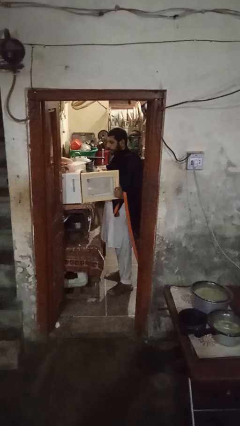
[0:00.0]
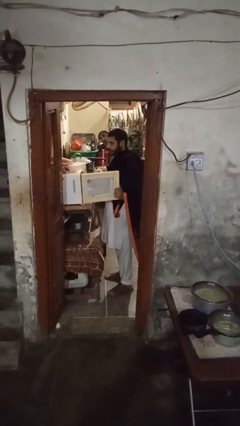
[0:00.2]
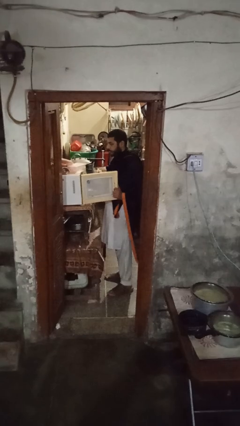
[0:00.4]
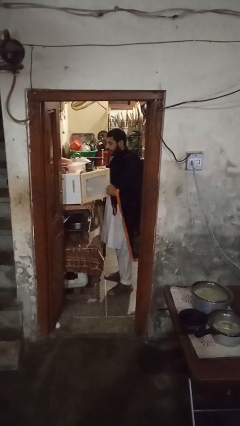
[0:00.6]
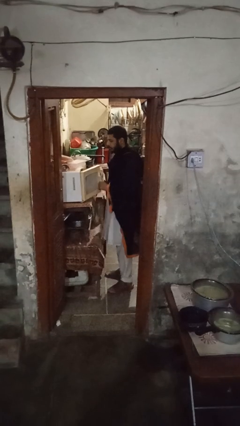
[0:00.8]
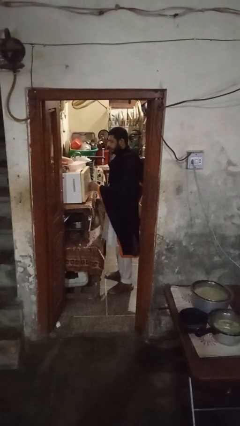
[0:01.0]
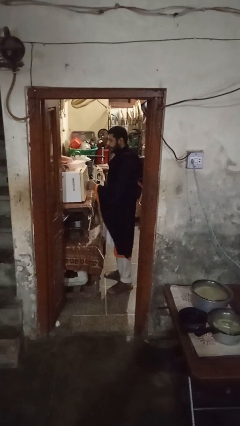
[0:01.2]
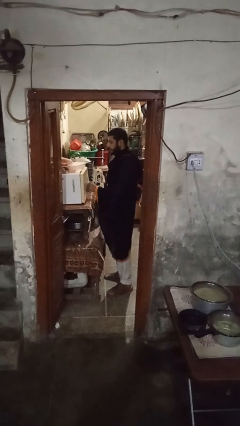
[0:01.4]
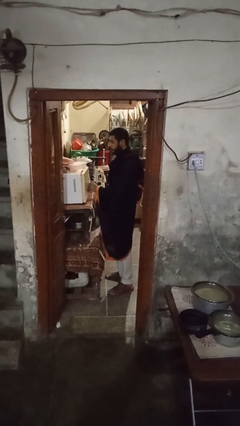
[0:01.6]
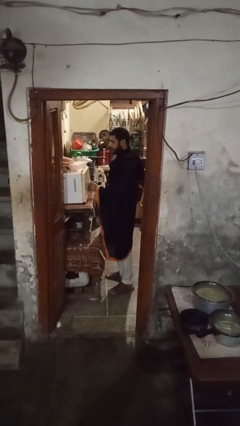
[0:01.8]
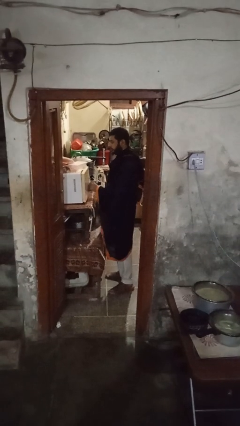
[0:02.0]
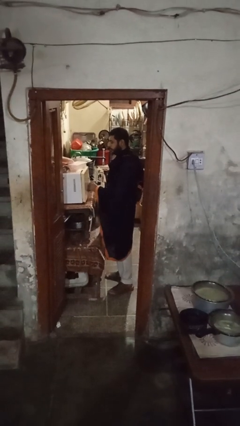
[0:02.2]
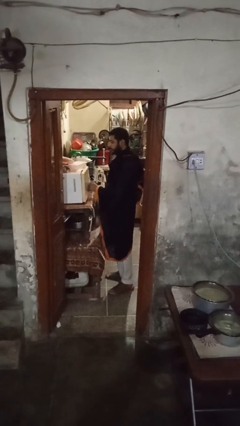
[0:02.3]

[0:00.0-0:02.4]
person closes microwave

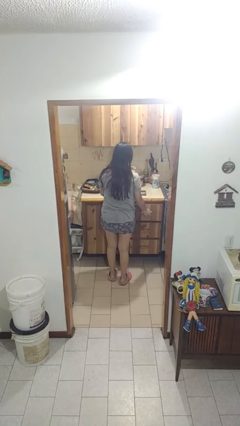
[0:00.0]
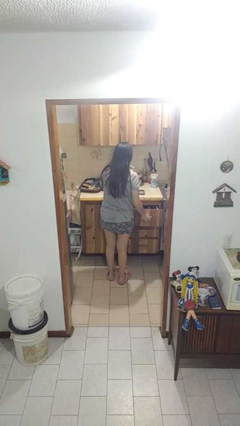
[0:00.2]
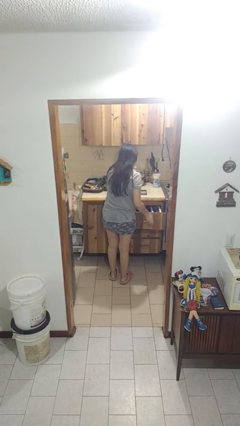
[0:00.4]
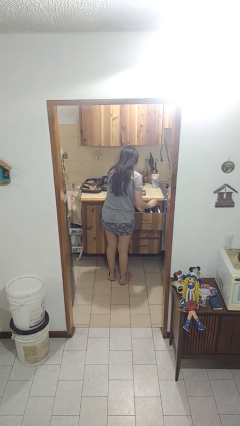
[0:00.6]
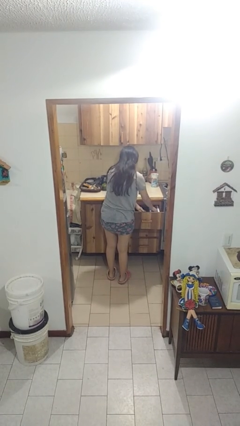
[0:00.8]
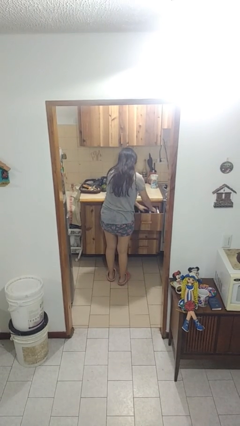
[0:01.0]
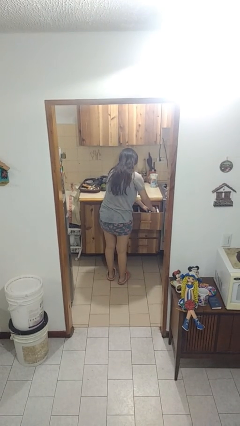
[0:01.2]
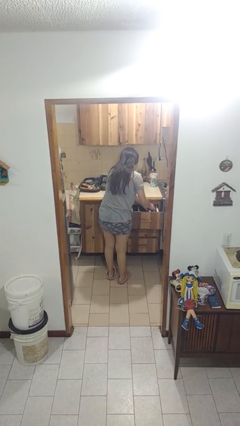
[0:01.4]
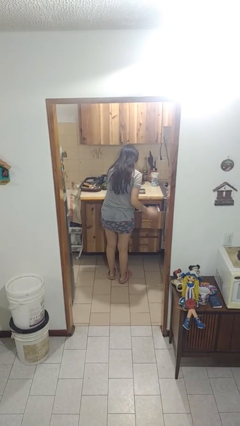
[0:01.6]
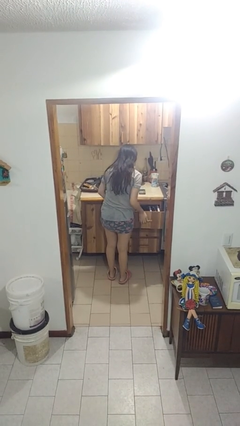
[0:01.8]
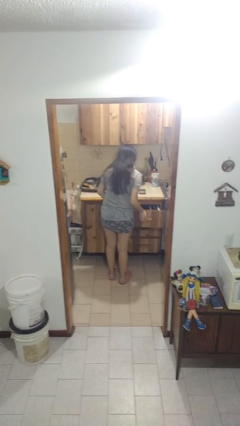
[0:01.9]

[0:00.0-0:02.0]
person searches in kitchen drawer

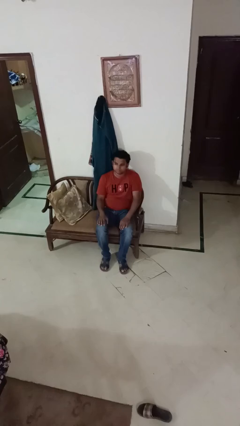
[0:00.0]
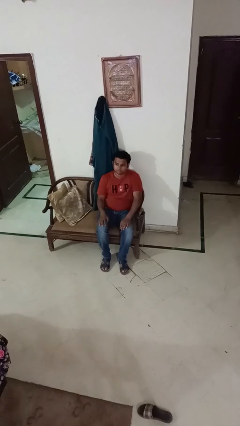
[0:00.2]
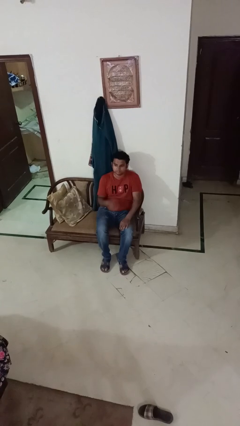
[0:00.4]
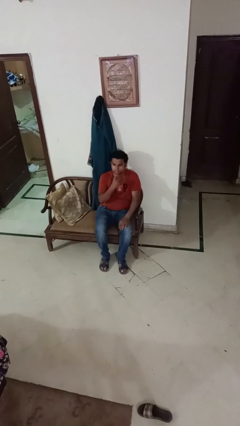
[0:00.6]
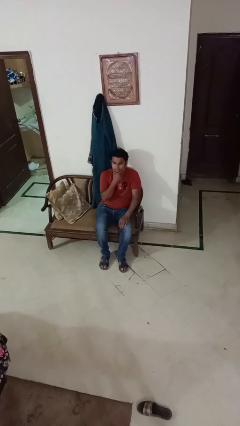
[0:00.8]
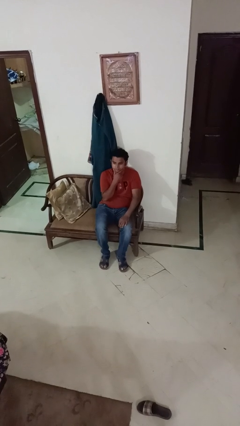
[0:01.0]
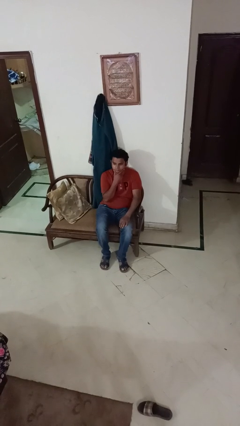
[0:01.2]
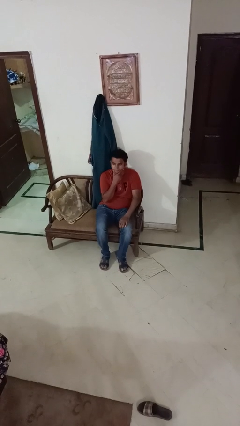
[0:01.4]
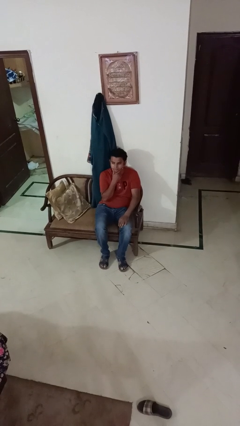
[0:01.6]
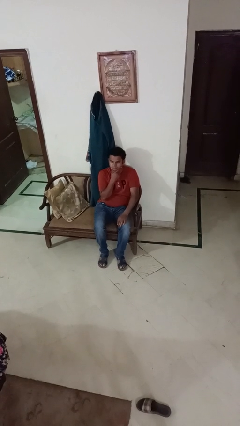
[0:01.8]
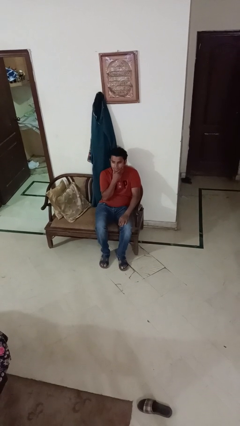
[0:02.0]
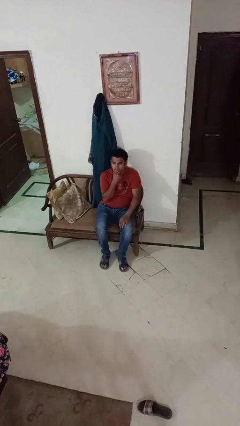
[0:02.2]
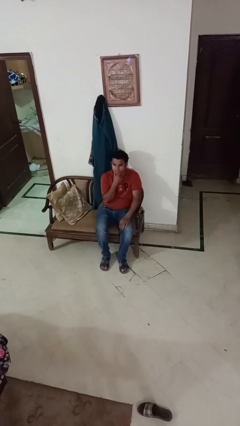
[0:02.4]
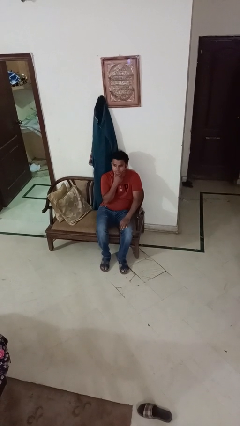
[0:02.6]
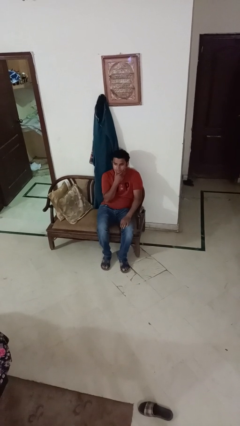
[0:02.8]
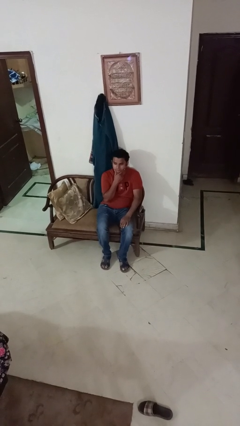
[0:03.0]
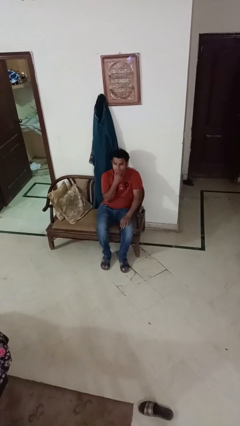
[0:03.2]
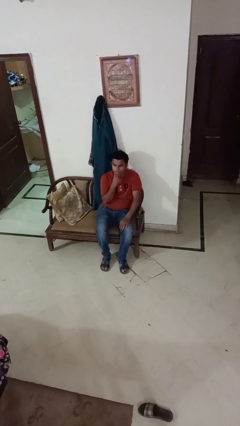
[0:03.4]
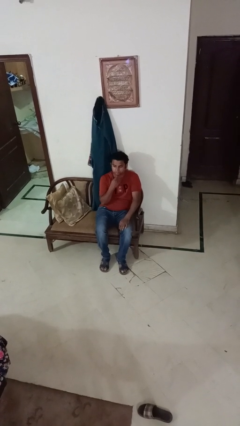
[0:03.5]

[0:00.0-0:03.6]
person strokes chin

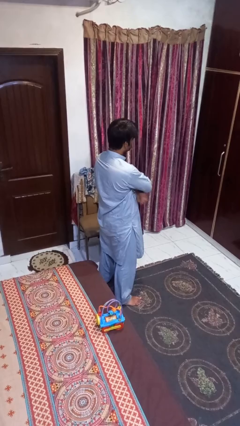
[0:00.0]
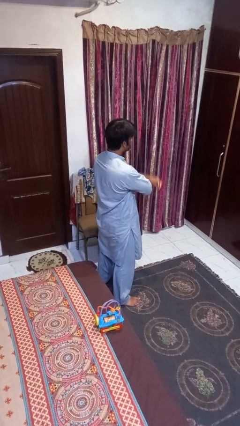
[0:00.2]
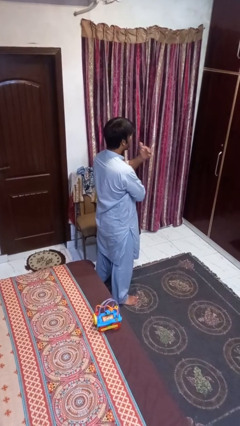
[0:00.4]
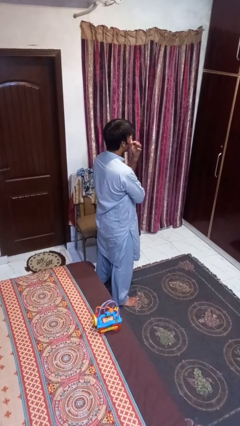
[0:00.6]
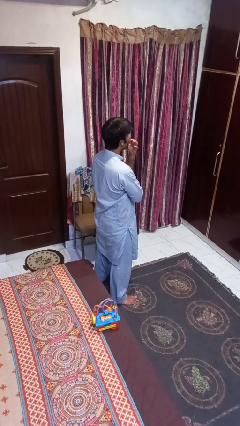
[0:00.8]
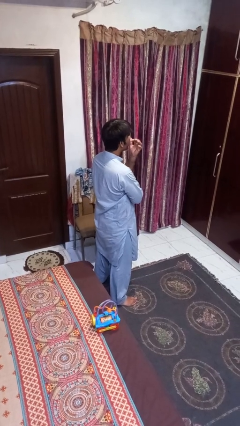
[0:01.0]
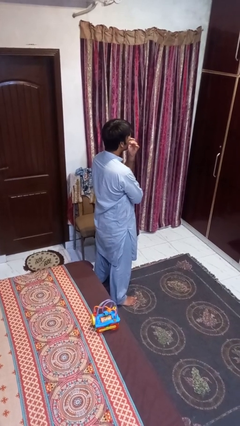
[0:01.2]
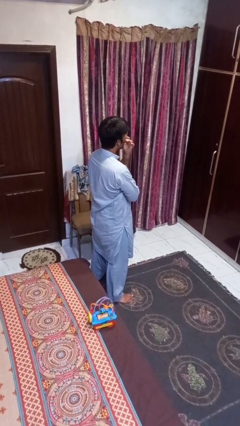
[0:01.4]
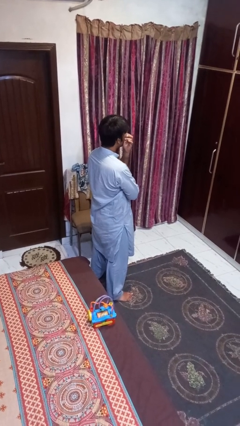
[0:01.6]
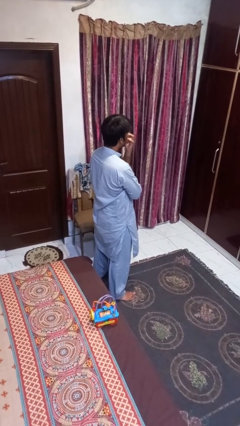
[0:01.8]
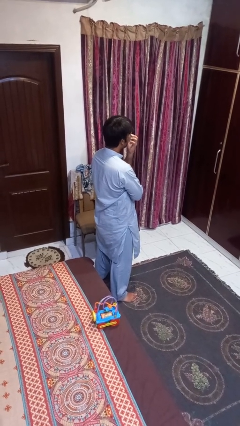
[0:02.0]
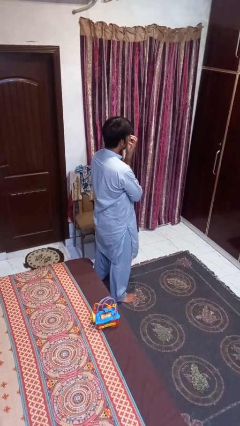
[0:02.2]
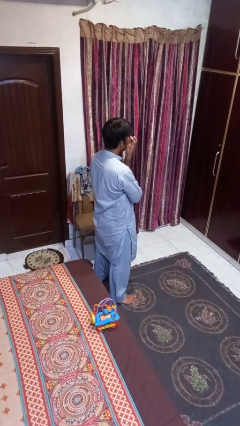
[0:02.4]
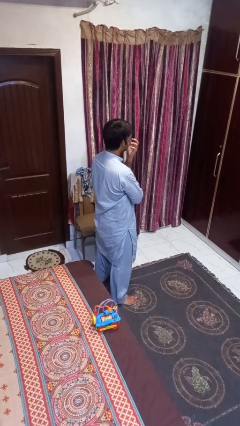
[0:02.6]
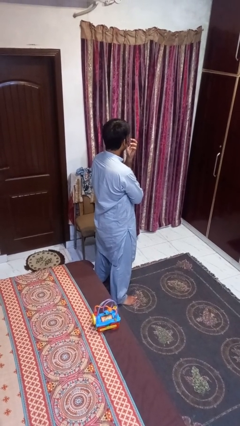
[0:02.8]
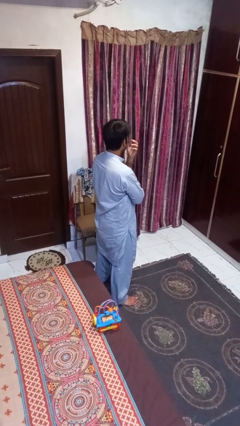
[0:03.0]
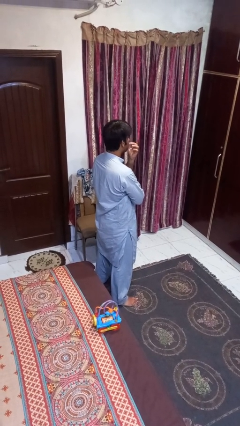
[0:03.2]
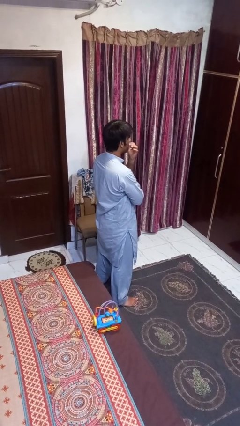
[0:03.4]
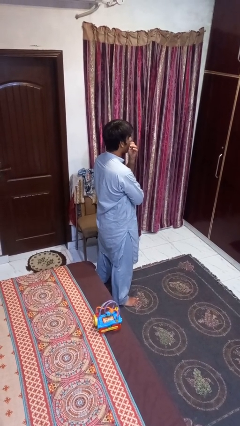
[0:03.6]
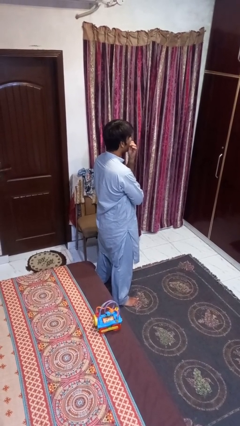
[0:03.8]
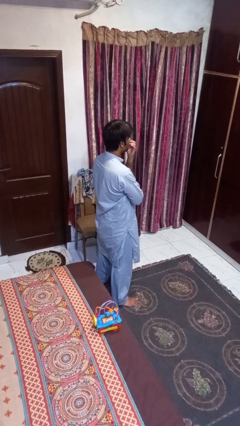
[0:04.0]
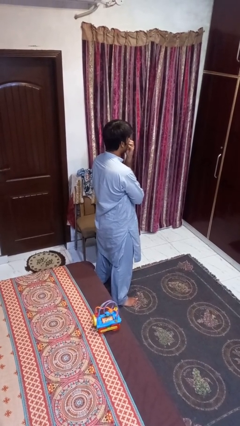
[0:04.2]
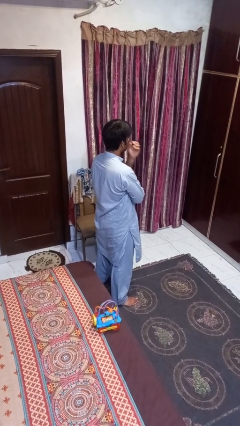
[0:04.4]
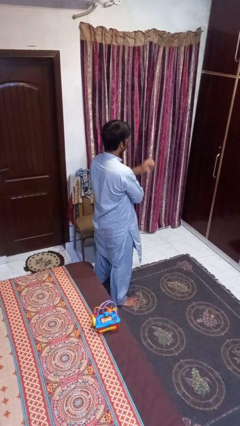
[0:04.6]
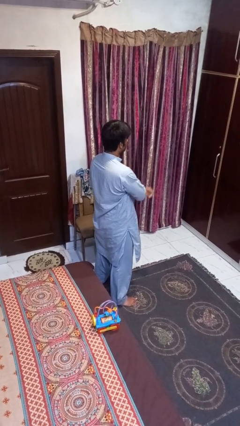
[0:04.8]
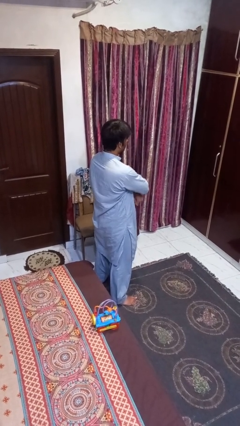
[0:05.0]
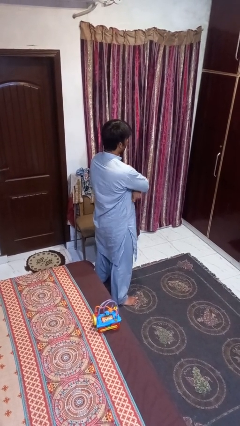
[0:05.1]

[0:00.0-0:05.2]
person licks fingers

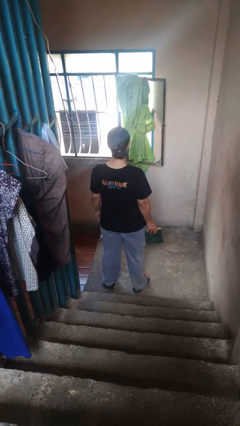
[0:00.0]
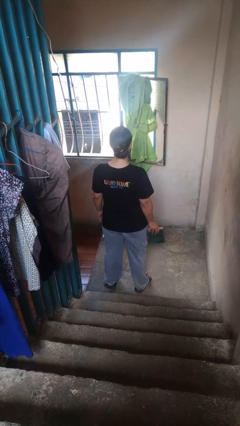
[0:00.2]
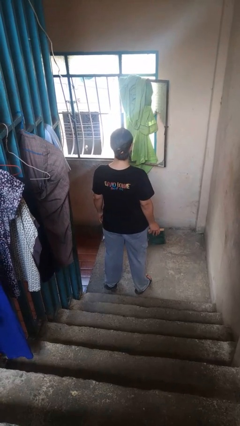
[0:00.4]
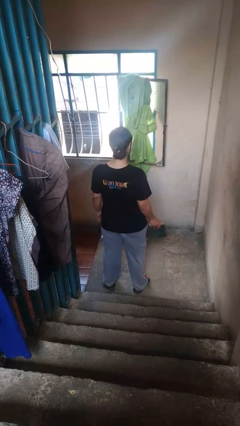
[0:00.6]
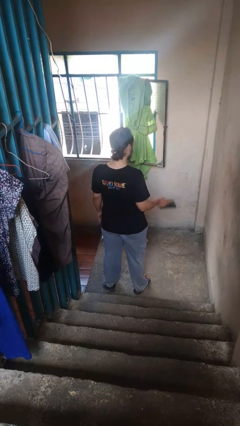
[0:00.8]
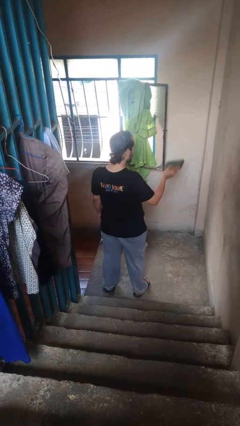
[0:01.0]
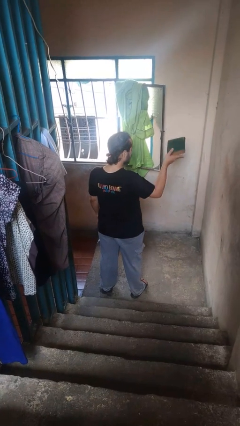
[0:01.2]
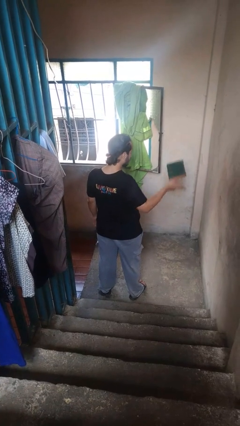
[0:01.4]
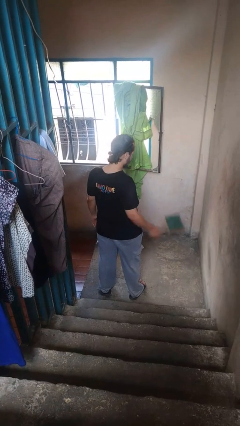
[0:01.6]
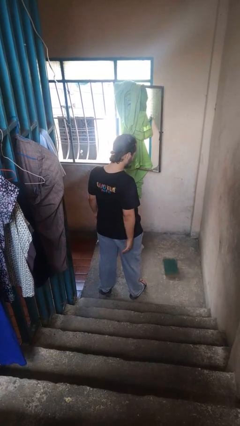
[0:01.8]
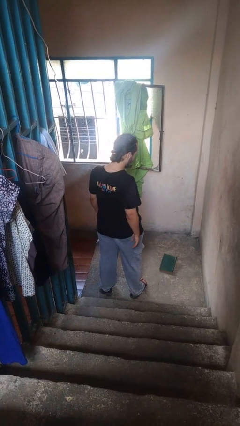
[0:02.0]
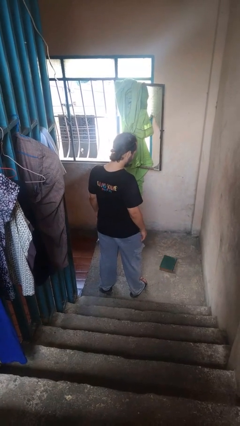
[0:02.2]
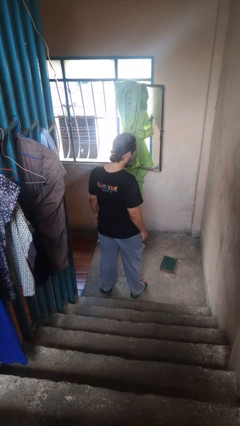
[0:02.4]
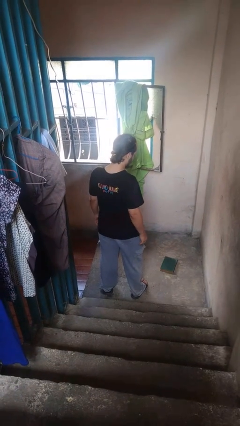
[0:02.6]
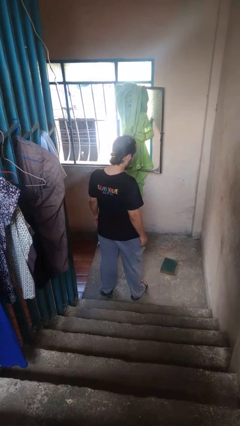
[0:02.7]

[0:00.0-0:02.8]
person throws object into air

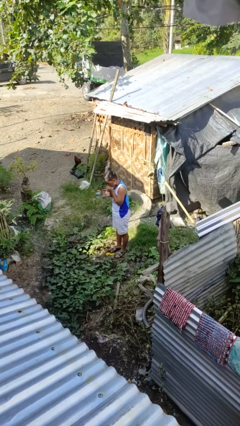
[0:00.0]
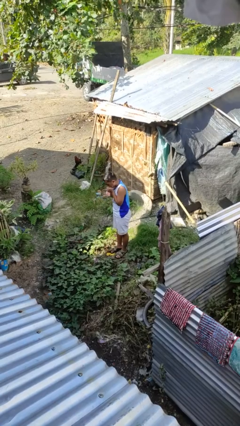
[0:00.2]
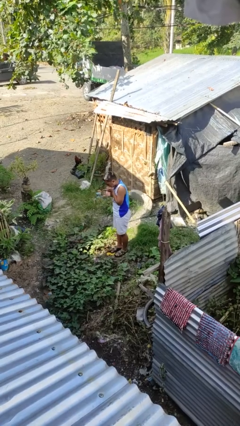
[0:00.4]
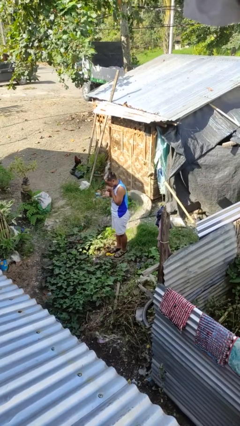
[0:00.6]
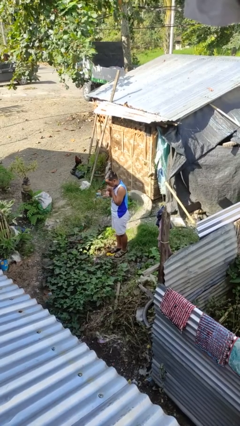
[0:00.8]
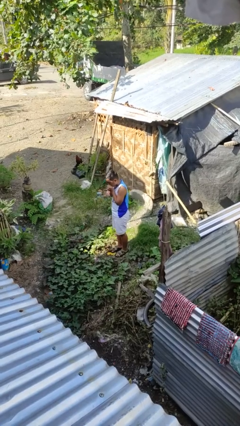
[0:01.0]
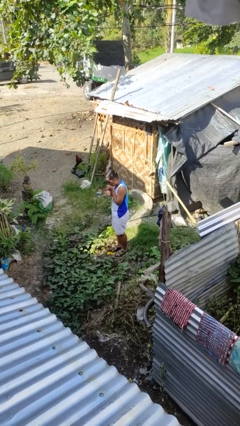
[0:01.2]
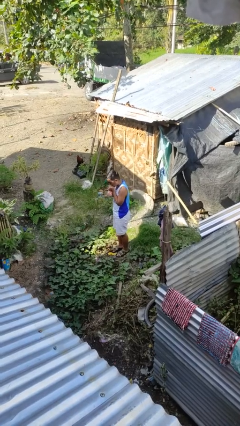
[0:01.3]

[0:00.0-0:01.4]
person blows into hands
